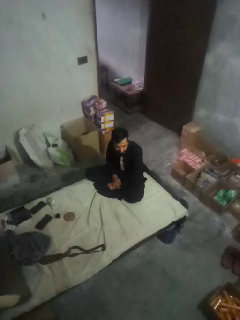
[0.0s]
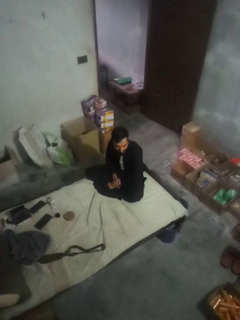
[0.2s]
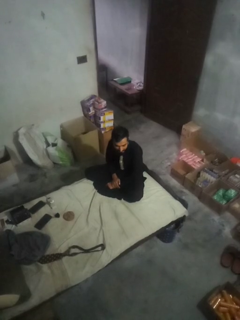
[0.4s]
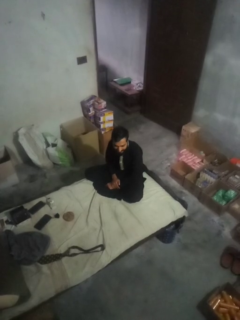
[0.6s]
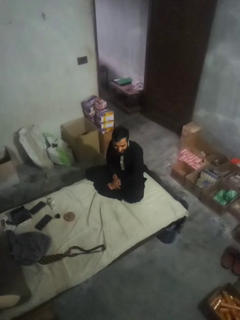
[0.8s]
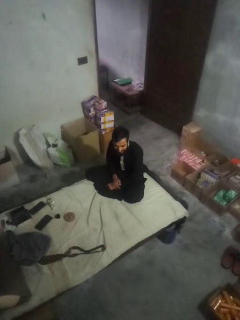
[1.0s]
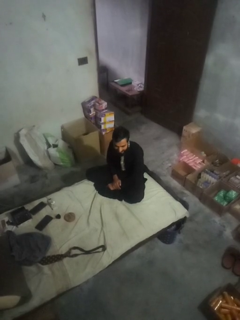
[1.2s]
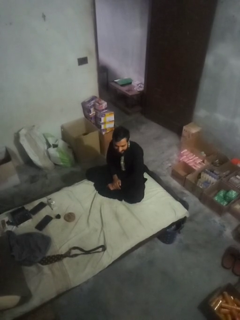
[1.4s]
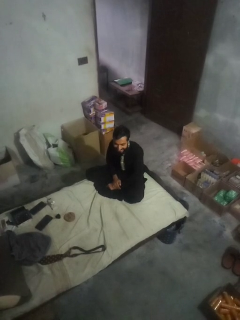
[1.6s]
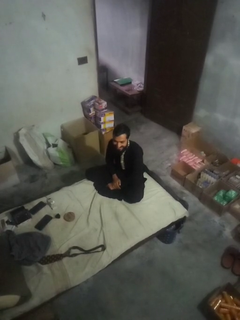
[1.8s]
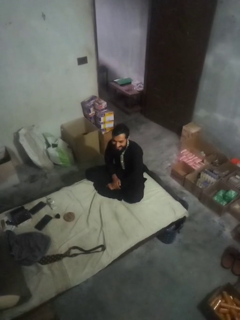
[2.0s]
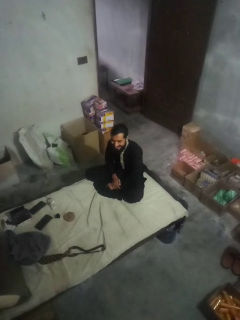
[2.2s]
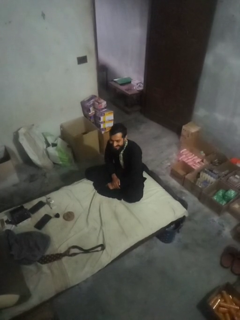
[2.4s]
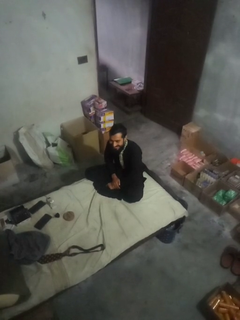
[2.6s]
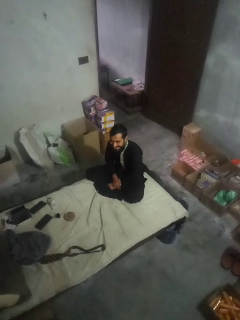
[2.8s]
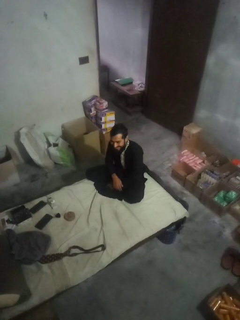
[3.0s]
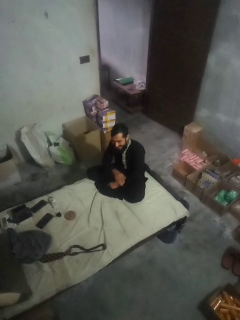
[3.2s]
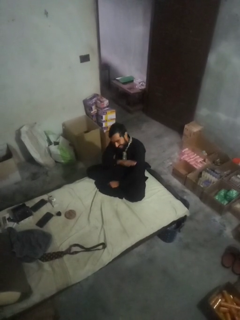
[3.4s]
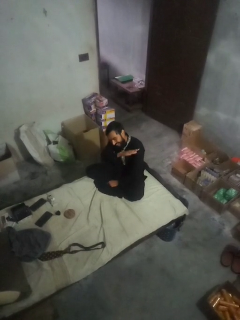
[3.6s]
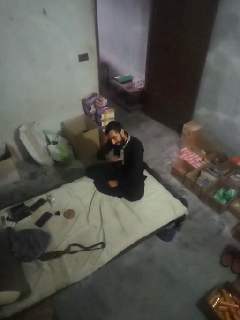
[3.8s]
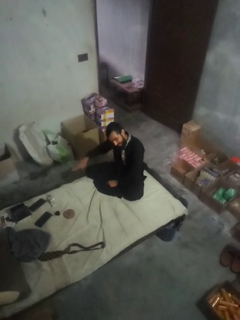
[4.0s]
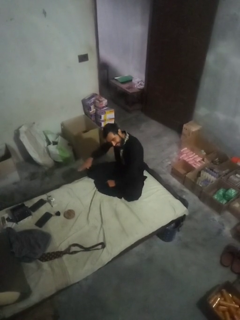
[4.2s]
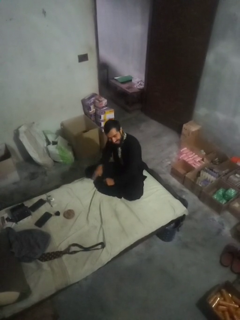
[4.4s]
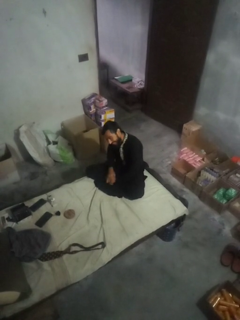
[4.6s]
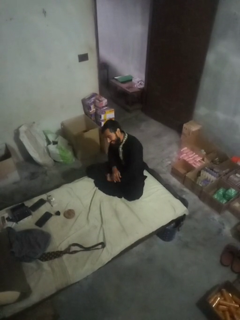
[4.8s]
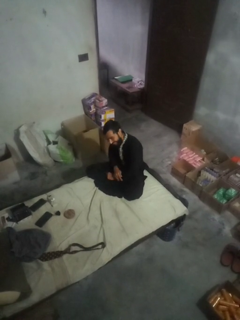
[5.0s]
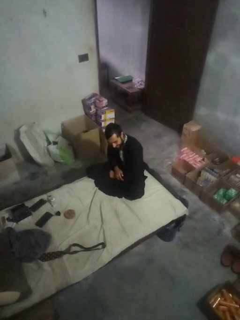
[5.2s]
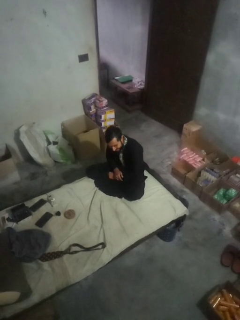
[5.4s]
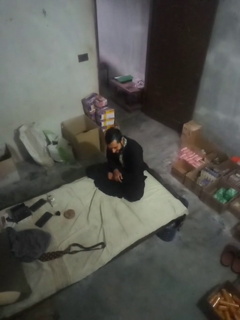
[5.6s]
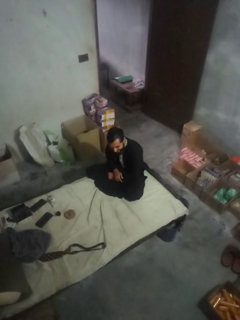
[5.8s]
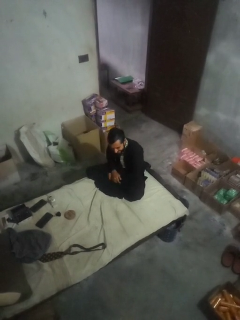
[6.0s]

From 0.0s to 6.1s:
person gestures cut

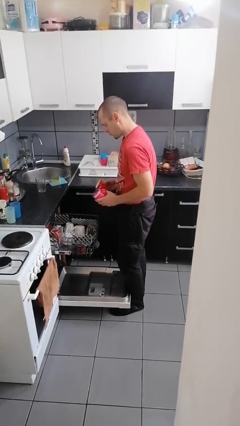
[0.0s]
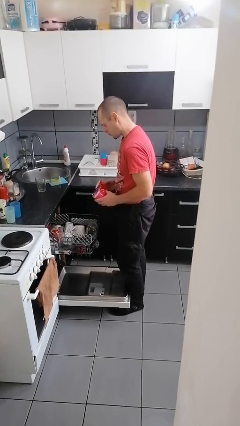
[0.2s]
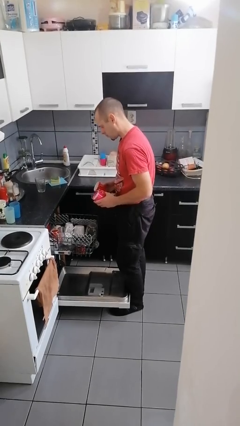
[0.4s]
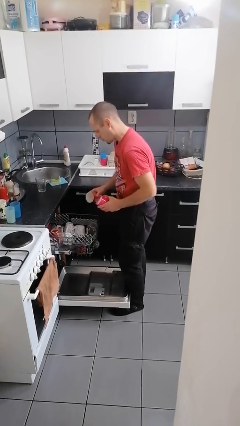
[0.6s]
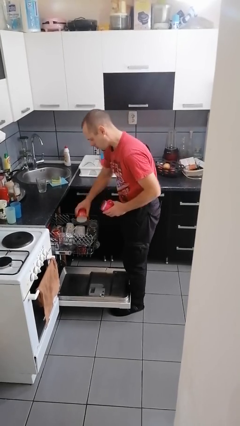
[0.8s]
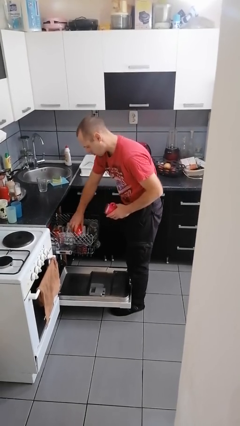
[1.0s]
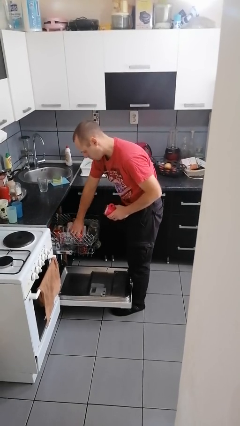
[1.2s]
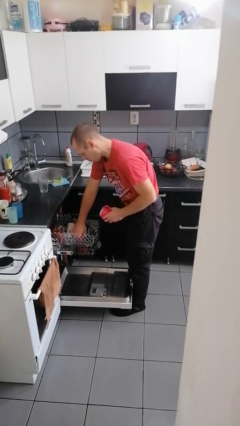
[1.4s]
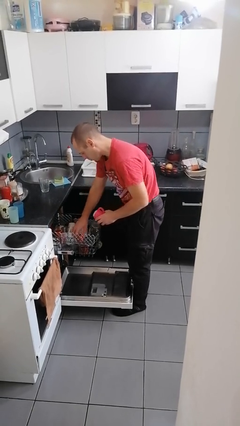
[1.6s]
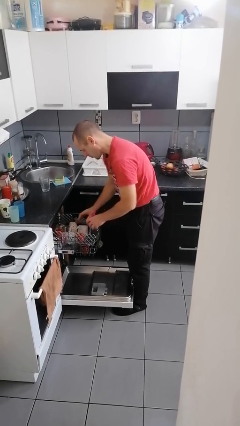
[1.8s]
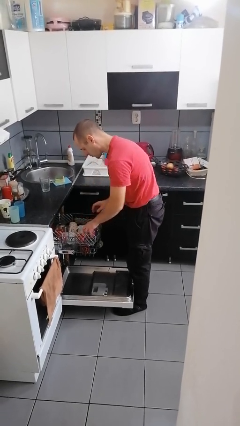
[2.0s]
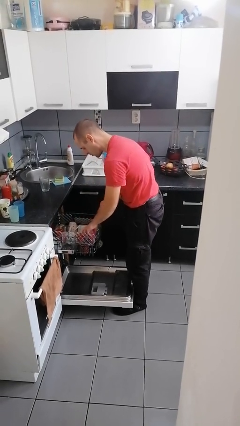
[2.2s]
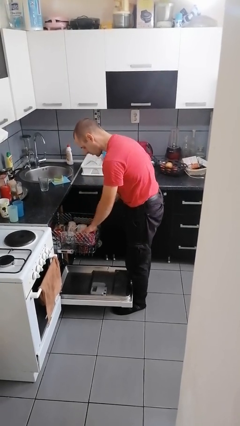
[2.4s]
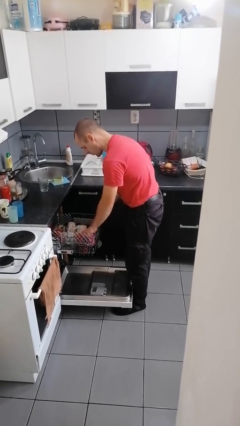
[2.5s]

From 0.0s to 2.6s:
person loads dishwasher

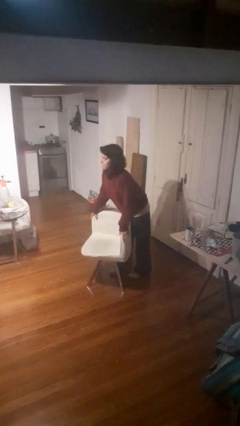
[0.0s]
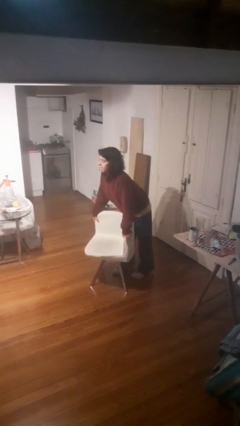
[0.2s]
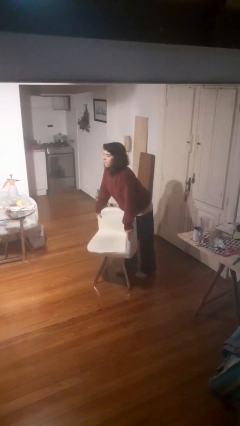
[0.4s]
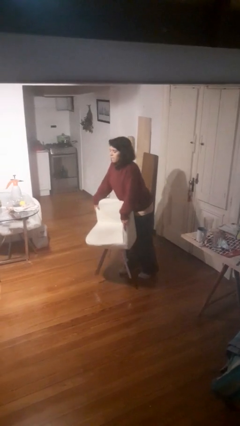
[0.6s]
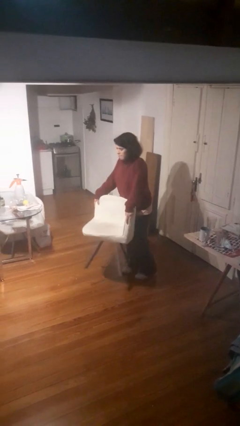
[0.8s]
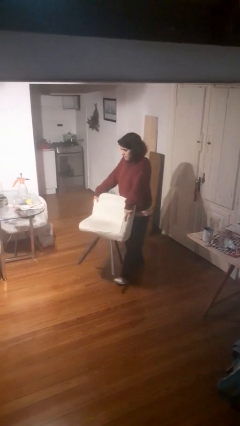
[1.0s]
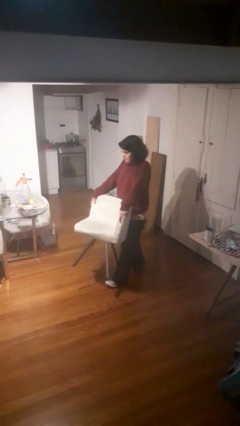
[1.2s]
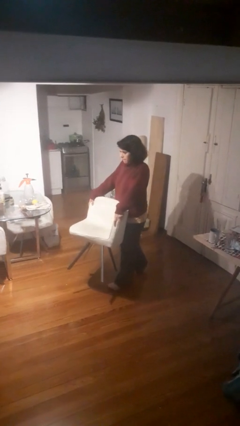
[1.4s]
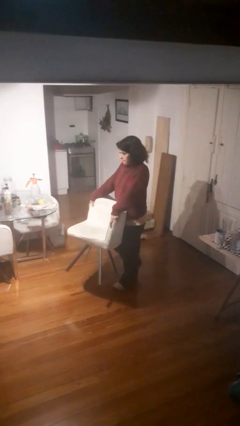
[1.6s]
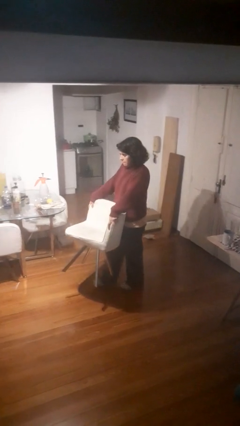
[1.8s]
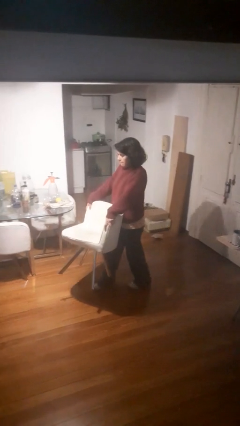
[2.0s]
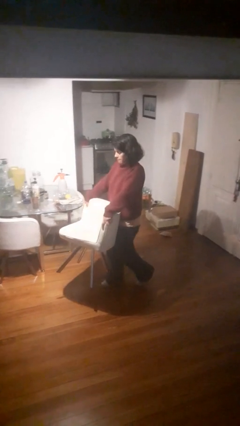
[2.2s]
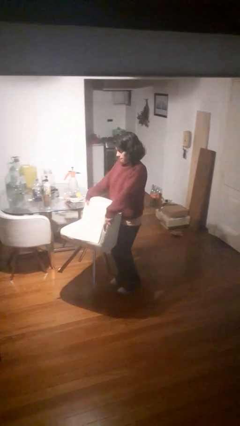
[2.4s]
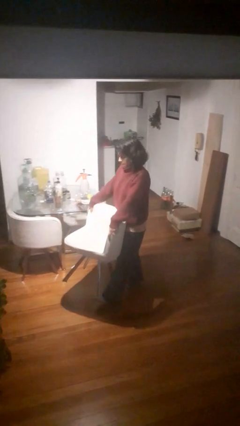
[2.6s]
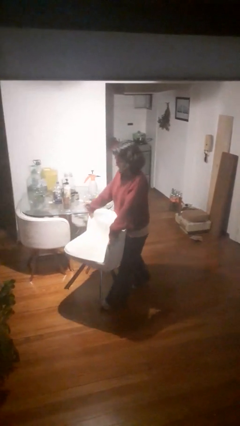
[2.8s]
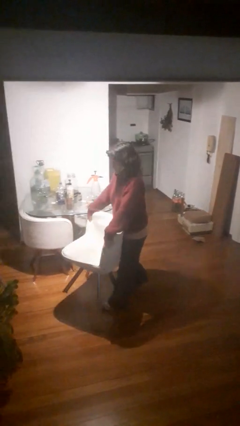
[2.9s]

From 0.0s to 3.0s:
person carries furniture

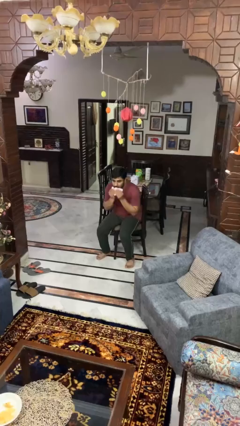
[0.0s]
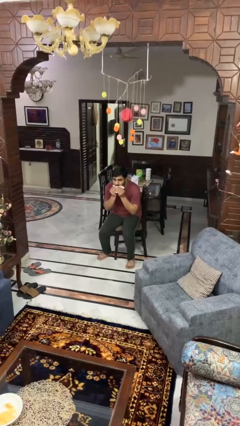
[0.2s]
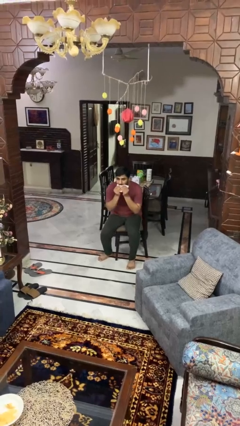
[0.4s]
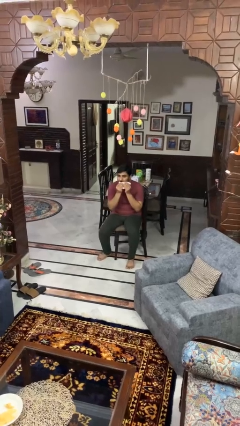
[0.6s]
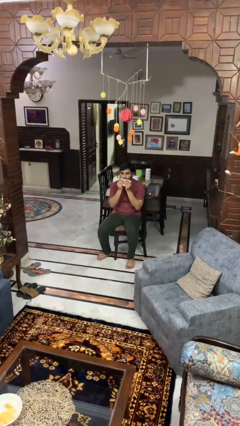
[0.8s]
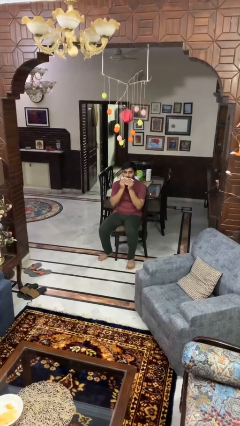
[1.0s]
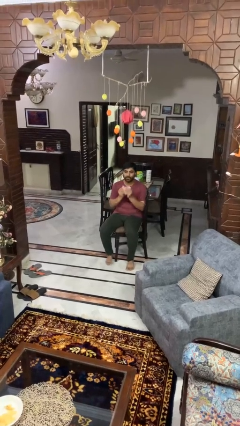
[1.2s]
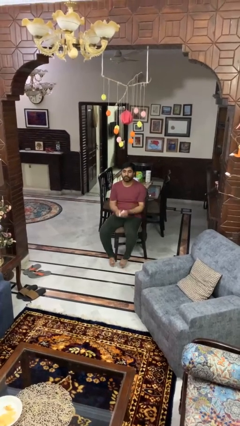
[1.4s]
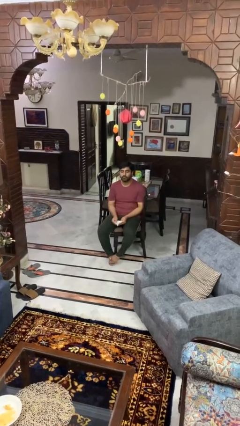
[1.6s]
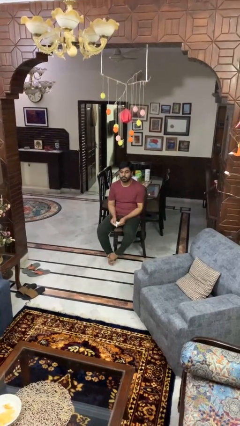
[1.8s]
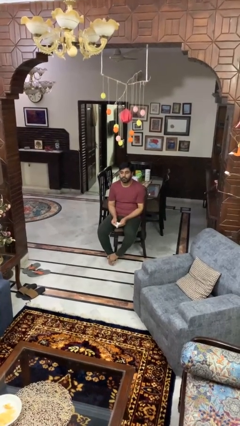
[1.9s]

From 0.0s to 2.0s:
person wipes mouth with napkin

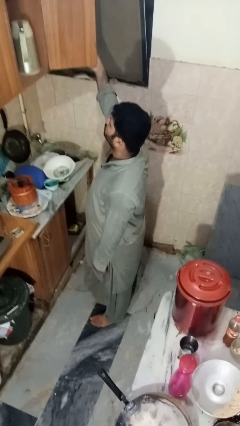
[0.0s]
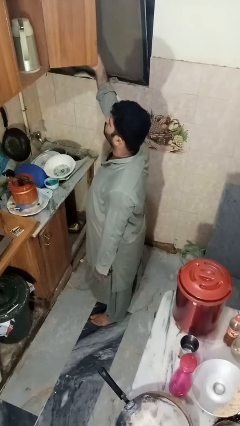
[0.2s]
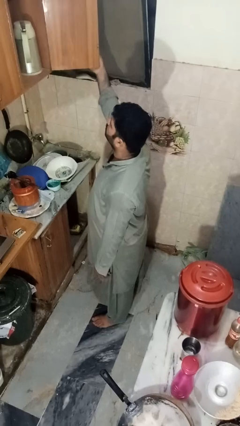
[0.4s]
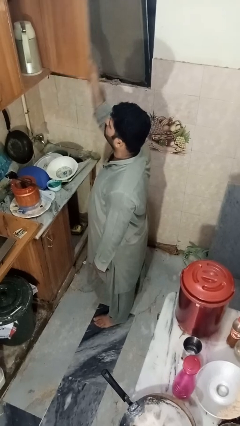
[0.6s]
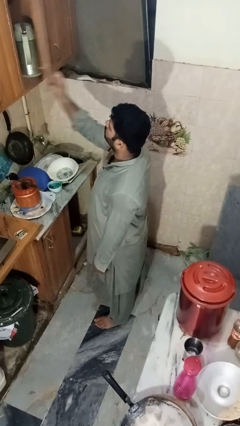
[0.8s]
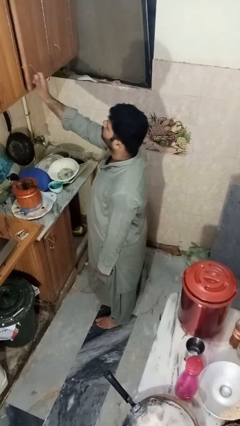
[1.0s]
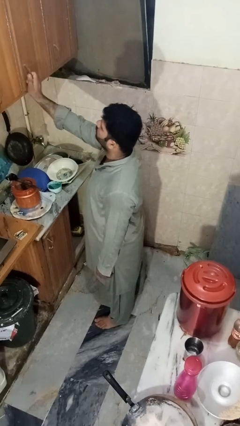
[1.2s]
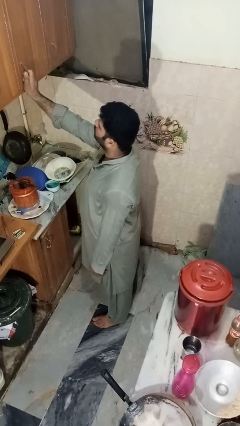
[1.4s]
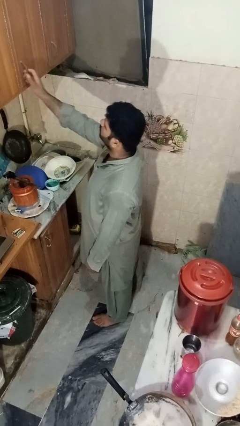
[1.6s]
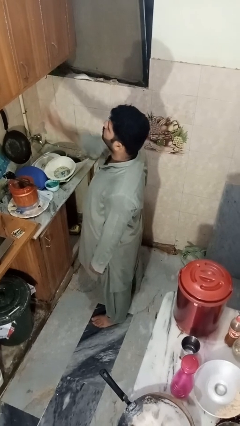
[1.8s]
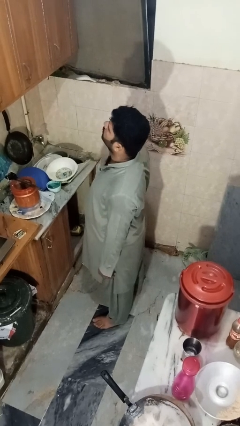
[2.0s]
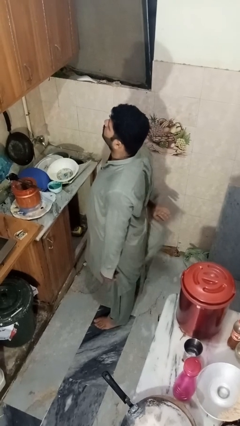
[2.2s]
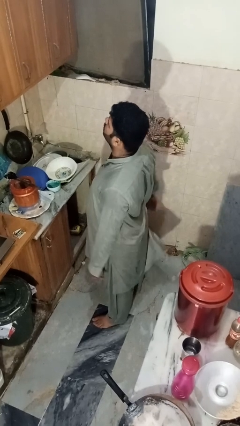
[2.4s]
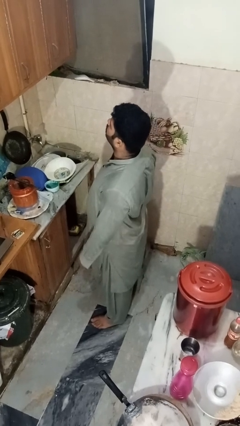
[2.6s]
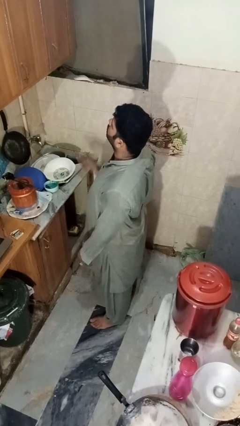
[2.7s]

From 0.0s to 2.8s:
person closes cabinet

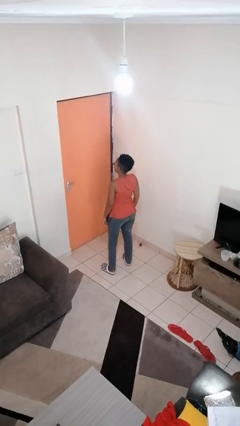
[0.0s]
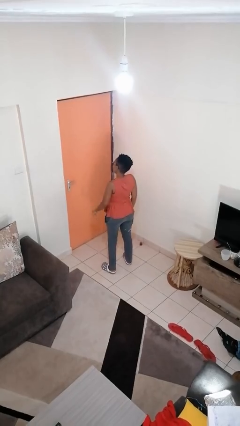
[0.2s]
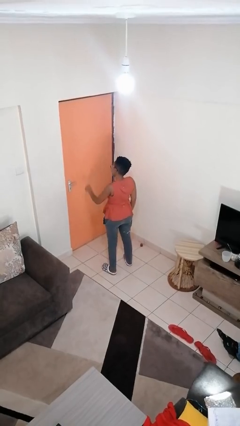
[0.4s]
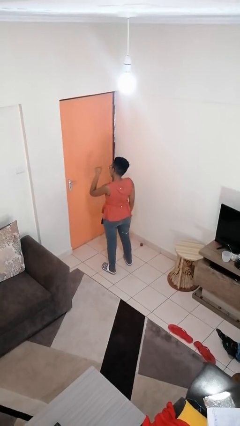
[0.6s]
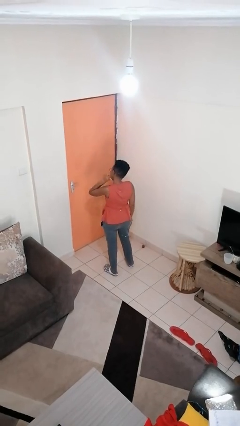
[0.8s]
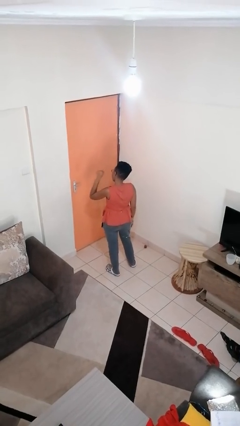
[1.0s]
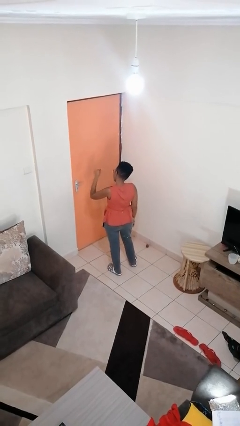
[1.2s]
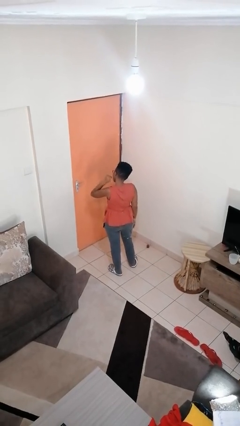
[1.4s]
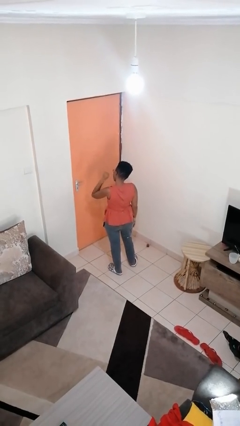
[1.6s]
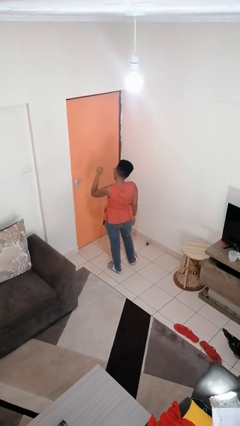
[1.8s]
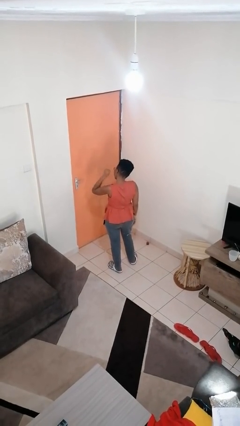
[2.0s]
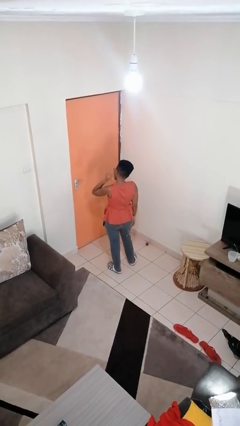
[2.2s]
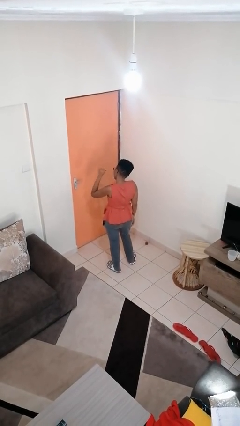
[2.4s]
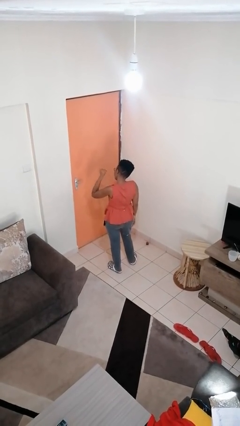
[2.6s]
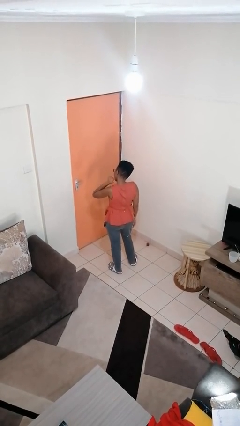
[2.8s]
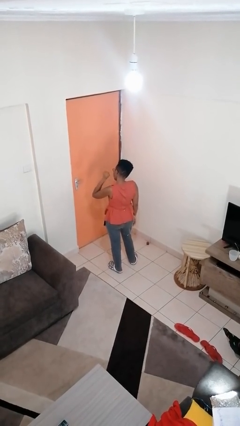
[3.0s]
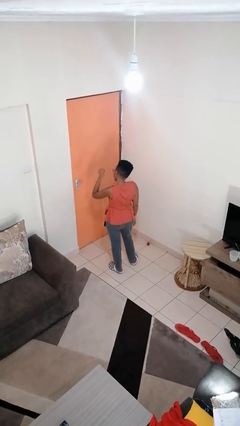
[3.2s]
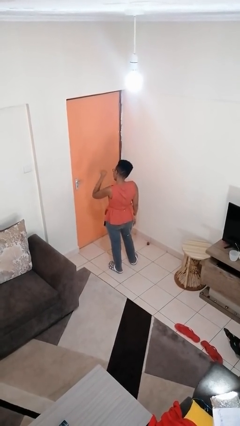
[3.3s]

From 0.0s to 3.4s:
person gestures behind me
